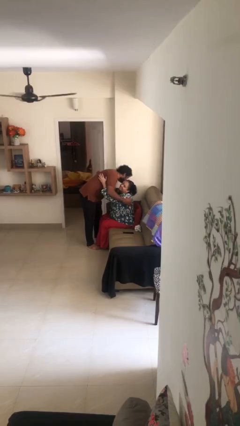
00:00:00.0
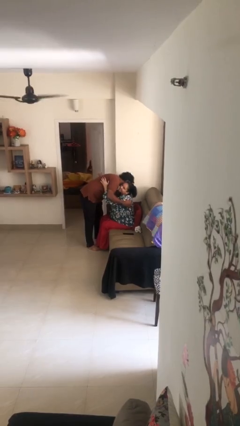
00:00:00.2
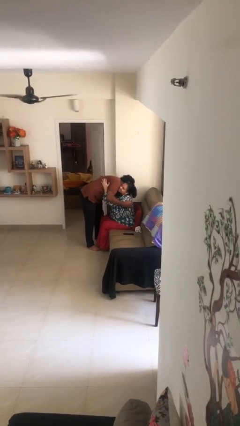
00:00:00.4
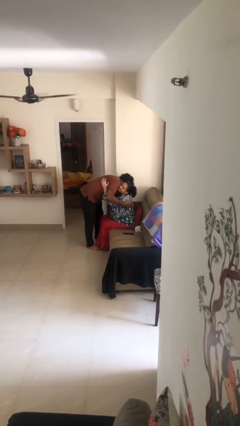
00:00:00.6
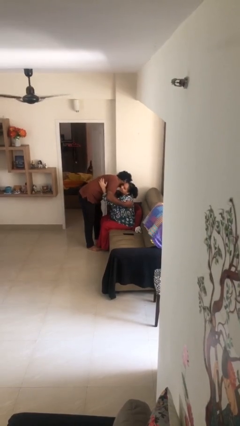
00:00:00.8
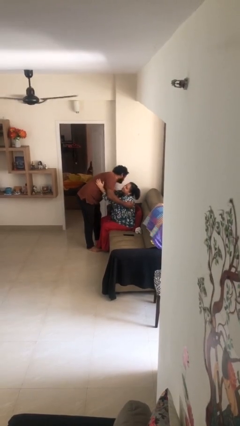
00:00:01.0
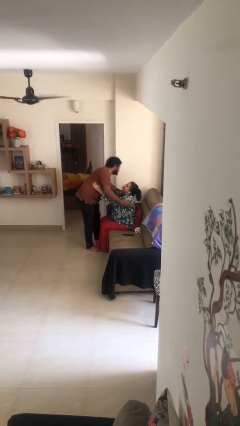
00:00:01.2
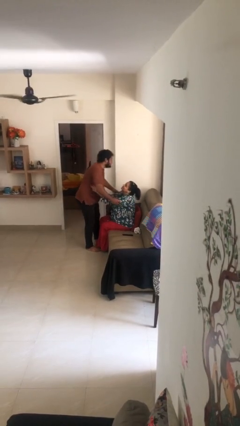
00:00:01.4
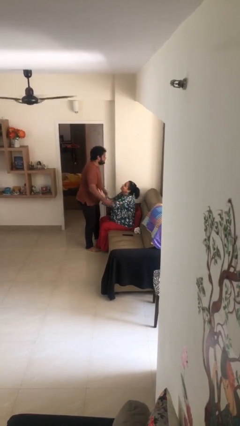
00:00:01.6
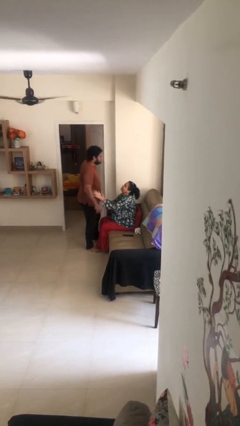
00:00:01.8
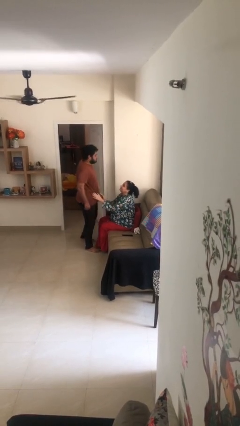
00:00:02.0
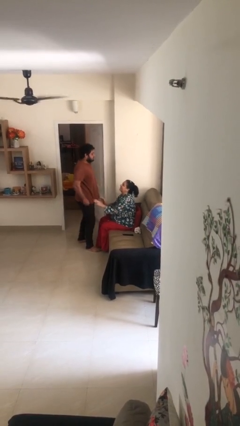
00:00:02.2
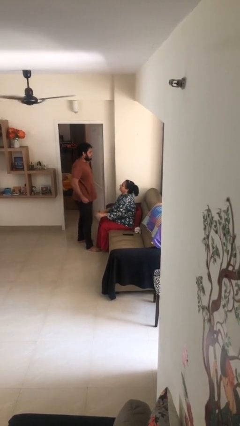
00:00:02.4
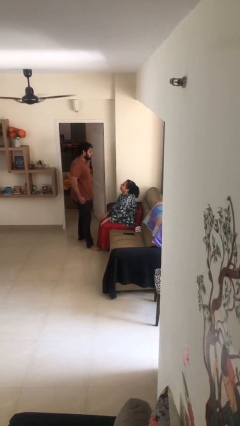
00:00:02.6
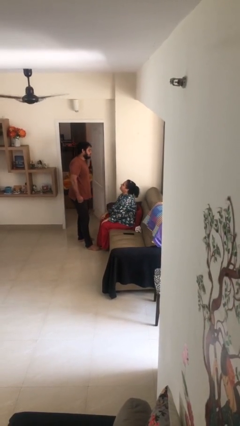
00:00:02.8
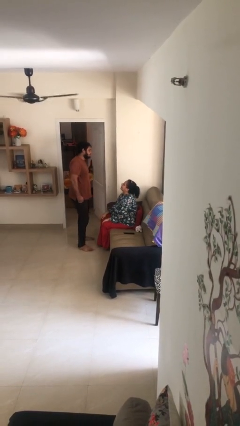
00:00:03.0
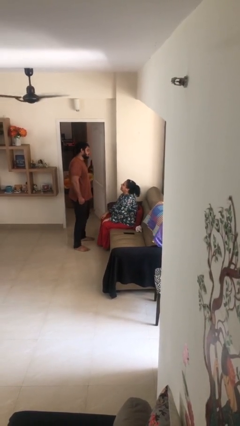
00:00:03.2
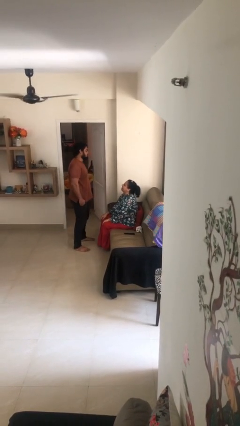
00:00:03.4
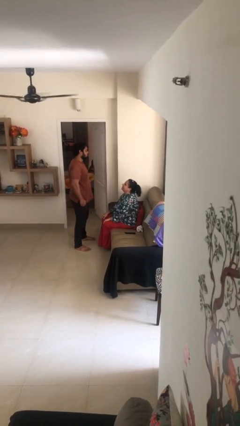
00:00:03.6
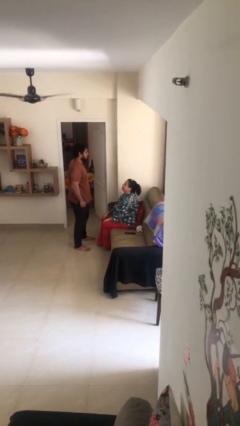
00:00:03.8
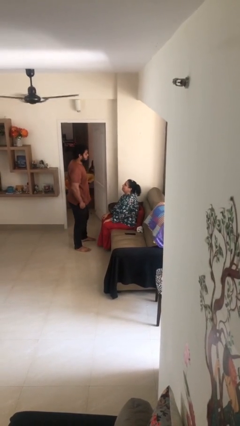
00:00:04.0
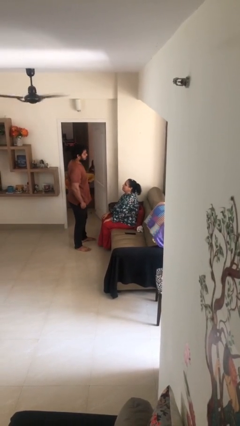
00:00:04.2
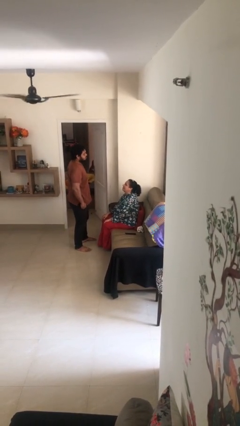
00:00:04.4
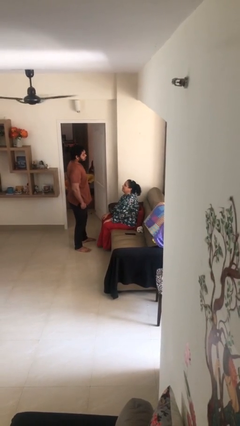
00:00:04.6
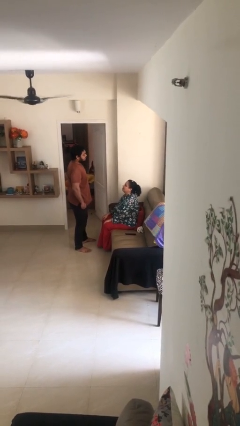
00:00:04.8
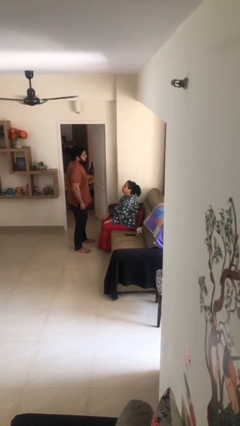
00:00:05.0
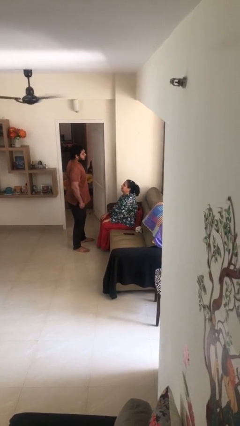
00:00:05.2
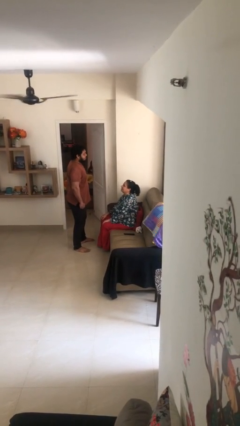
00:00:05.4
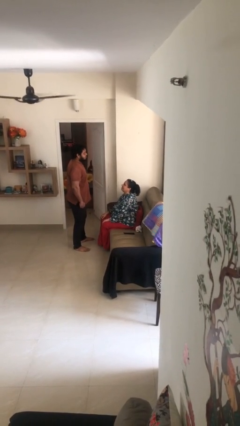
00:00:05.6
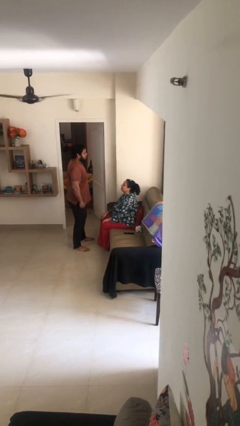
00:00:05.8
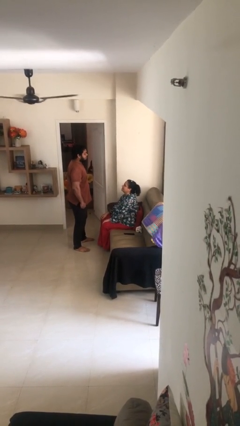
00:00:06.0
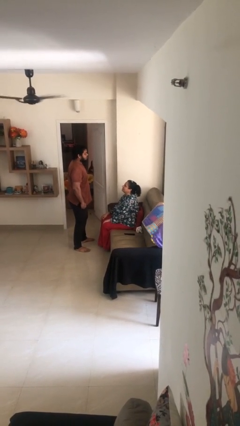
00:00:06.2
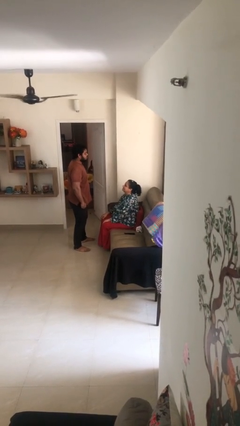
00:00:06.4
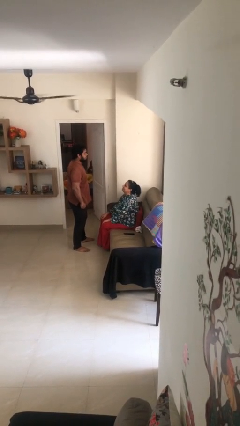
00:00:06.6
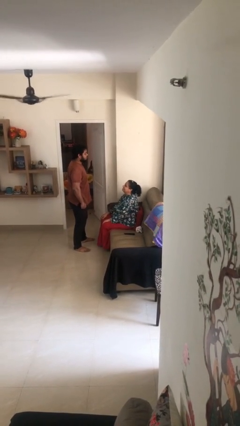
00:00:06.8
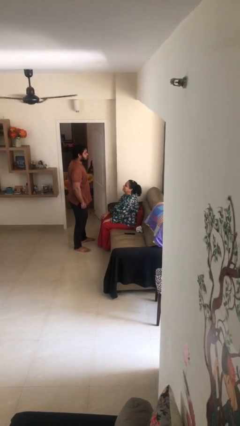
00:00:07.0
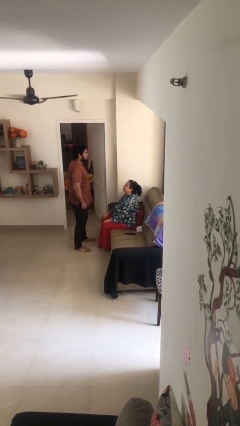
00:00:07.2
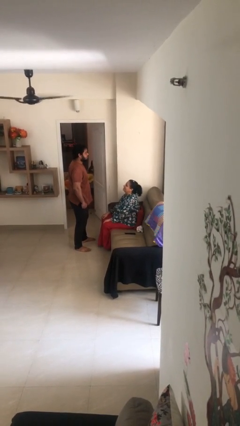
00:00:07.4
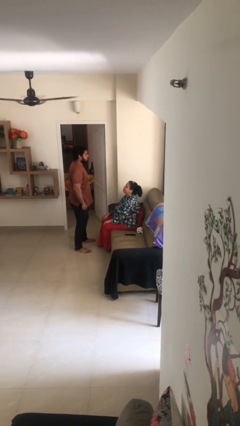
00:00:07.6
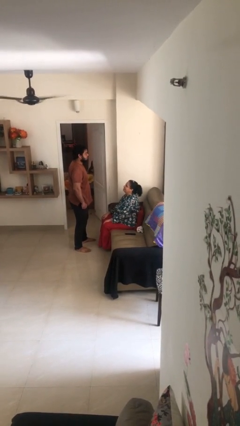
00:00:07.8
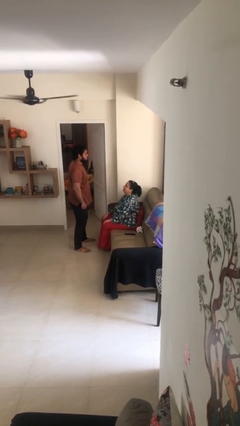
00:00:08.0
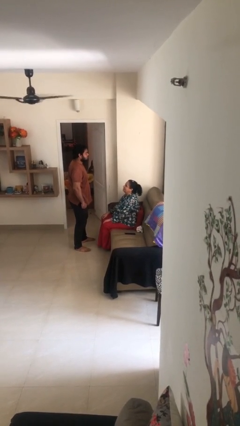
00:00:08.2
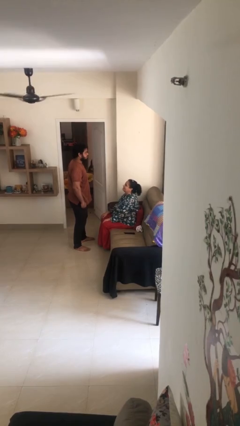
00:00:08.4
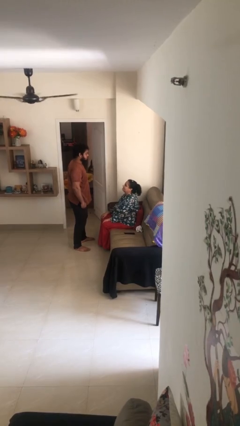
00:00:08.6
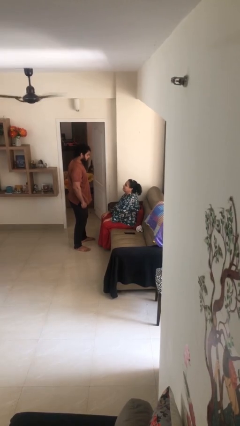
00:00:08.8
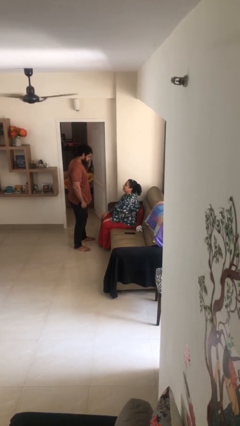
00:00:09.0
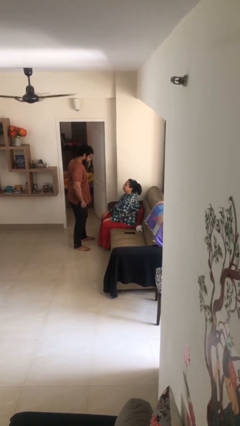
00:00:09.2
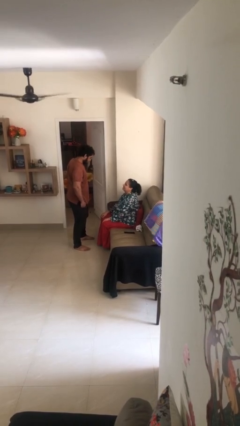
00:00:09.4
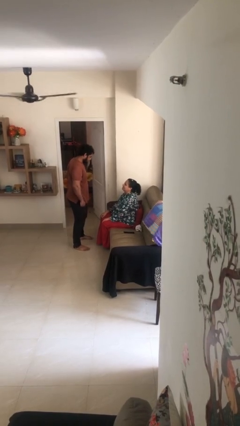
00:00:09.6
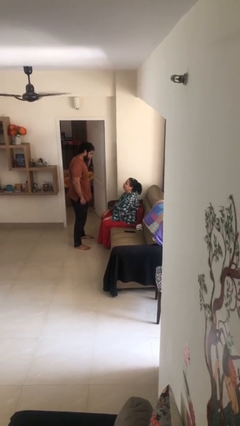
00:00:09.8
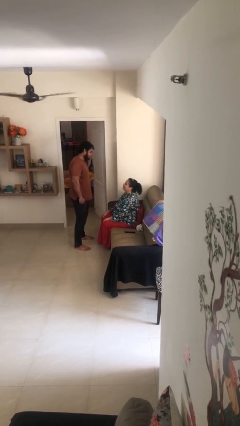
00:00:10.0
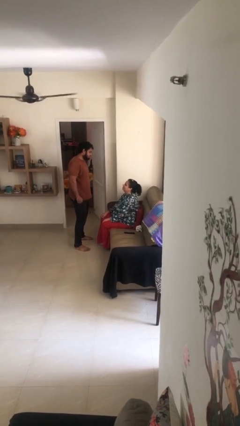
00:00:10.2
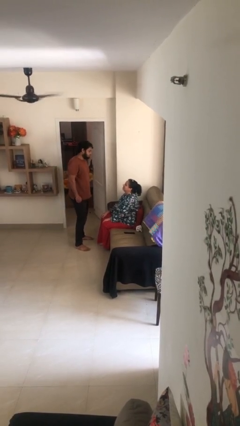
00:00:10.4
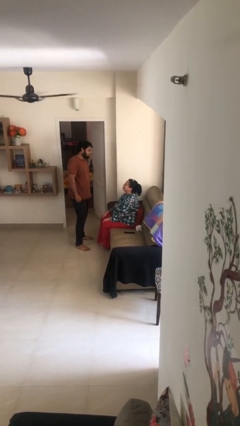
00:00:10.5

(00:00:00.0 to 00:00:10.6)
person embraces person

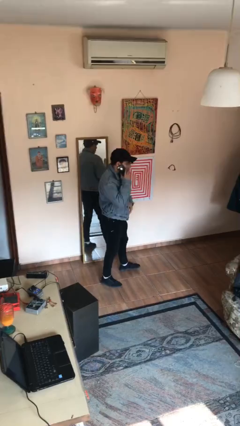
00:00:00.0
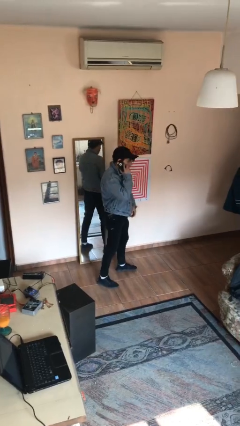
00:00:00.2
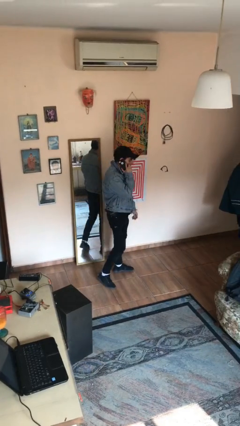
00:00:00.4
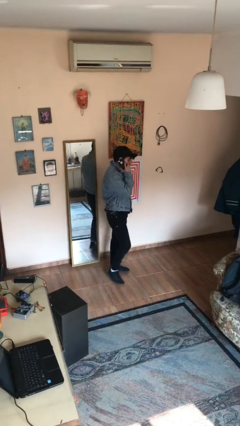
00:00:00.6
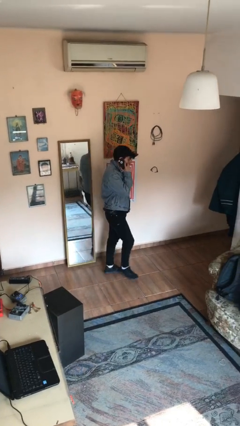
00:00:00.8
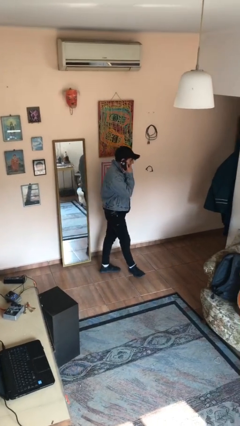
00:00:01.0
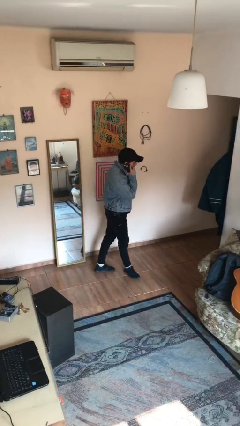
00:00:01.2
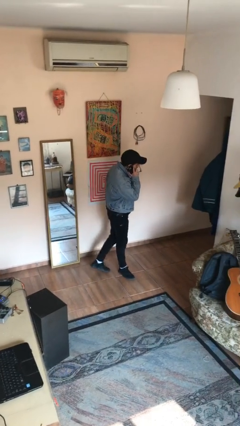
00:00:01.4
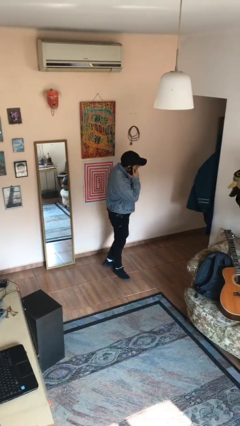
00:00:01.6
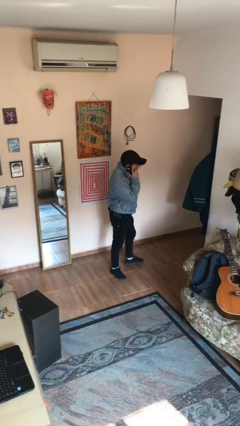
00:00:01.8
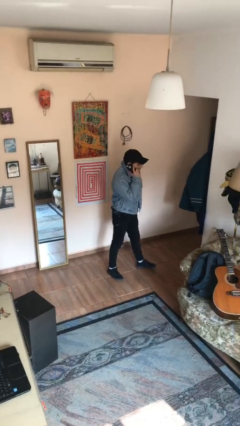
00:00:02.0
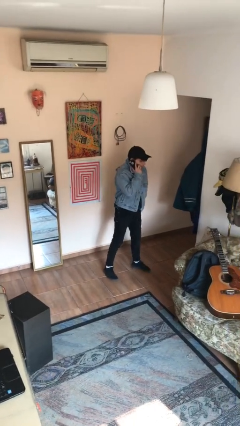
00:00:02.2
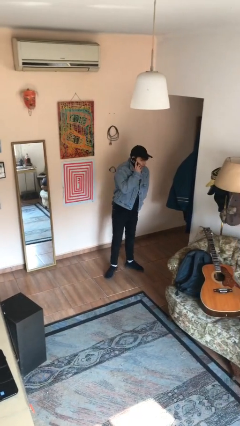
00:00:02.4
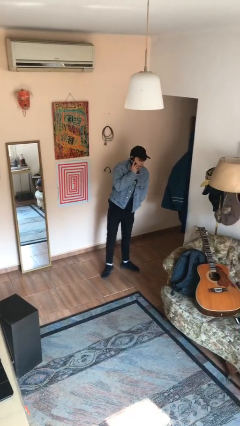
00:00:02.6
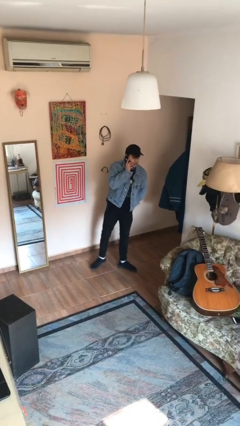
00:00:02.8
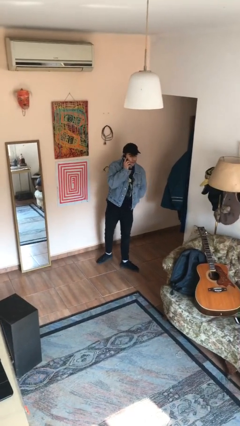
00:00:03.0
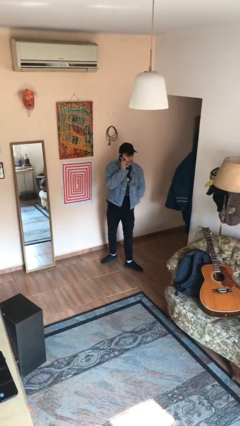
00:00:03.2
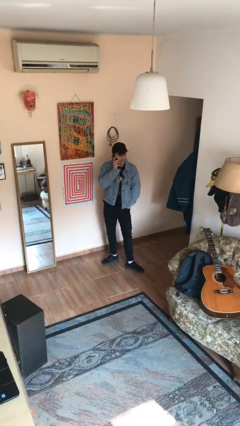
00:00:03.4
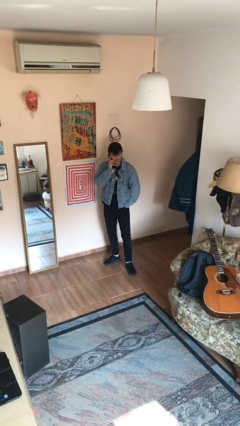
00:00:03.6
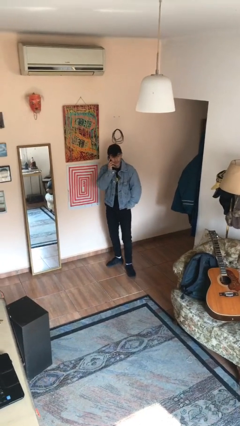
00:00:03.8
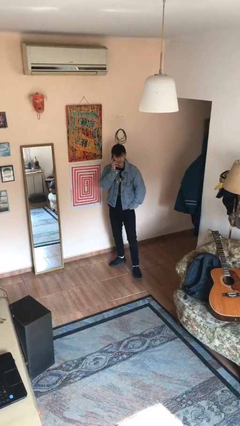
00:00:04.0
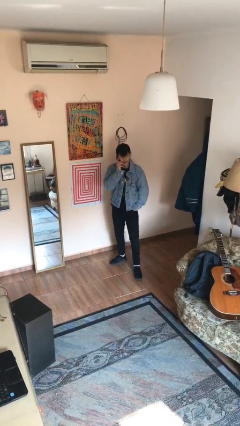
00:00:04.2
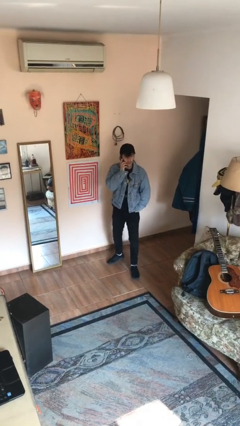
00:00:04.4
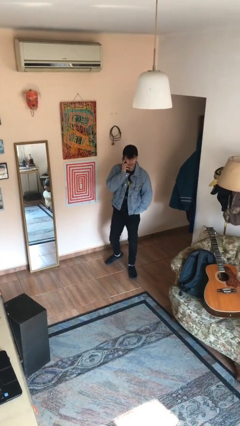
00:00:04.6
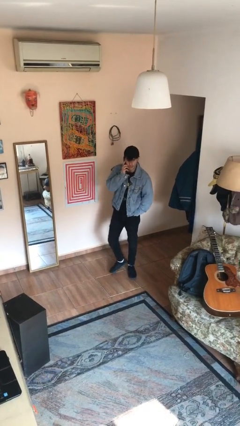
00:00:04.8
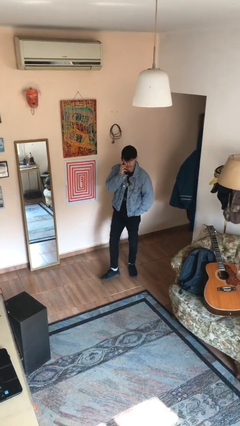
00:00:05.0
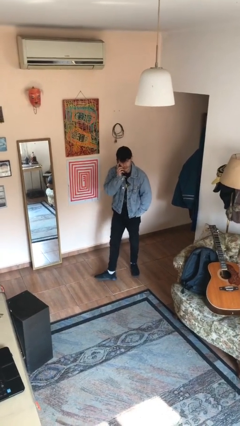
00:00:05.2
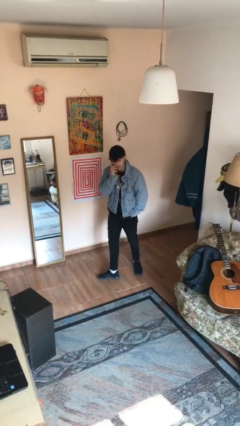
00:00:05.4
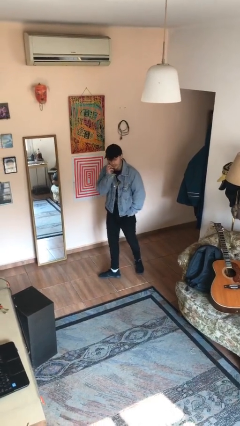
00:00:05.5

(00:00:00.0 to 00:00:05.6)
person talks on phone

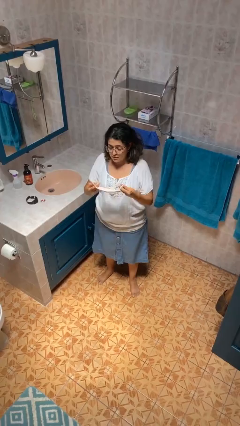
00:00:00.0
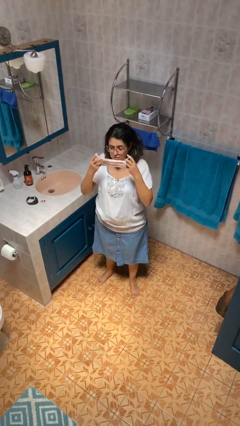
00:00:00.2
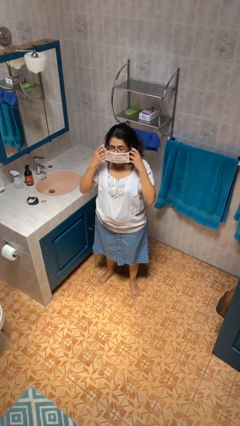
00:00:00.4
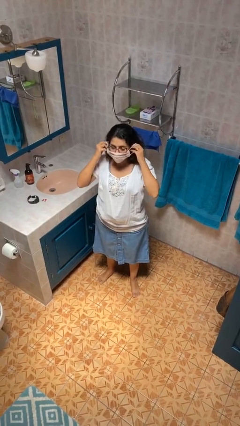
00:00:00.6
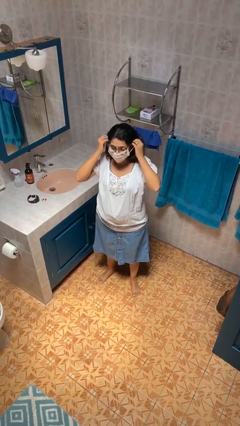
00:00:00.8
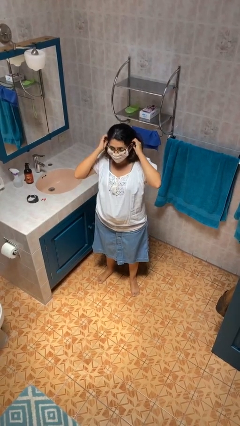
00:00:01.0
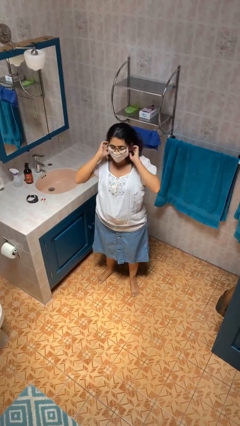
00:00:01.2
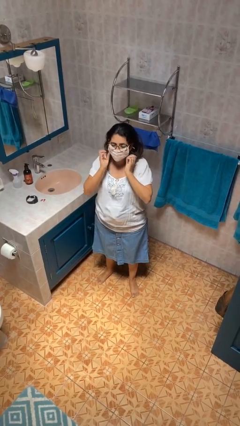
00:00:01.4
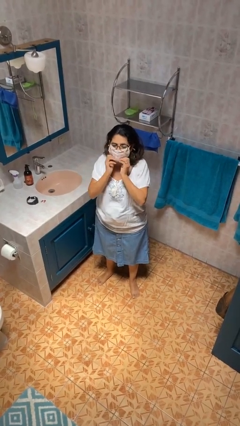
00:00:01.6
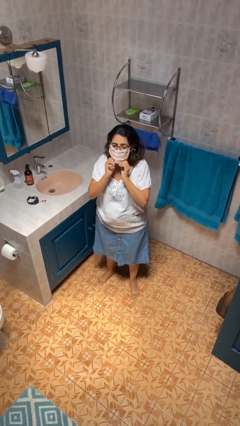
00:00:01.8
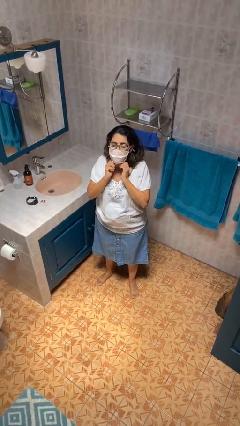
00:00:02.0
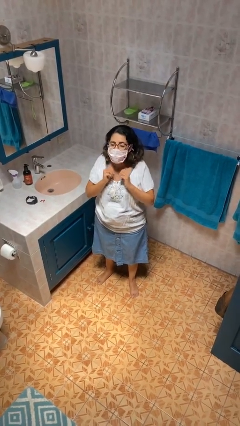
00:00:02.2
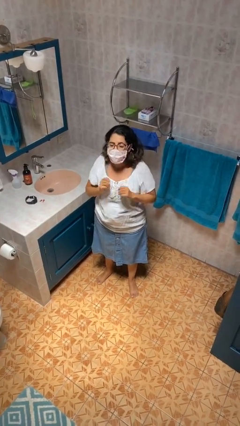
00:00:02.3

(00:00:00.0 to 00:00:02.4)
person puts on facemask
